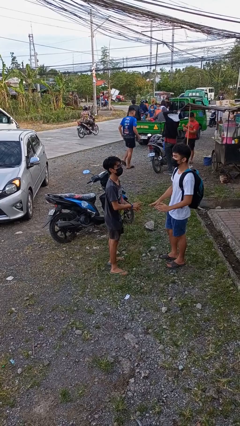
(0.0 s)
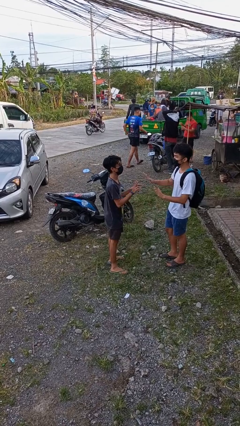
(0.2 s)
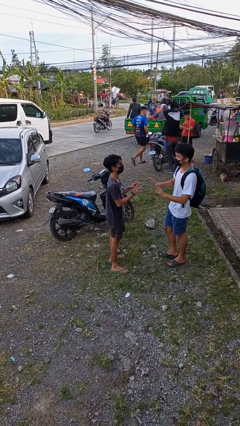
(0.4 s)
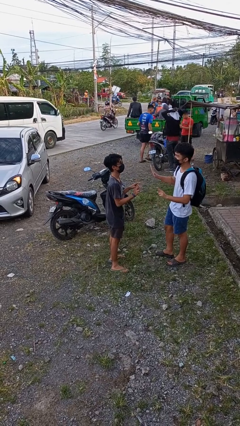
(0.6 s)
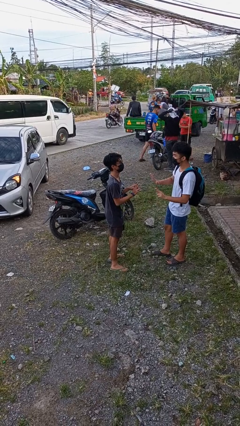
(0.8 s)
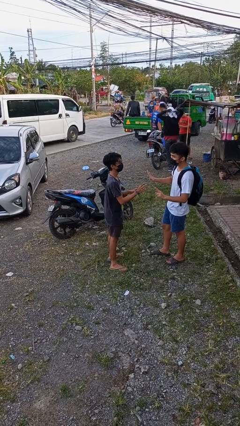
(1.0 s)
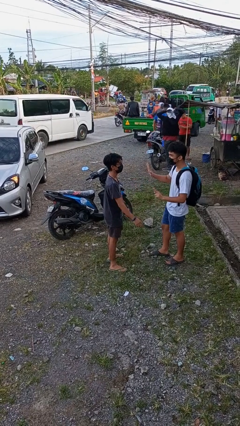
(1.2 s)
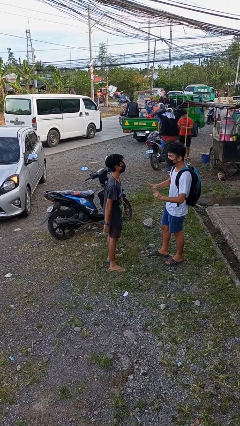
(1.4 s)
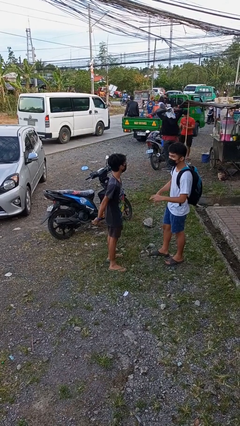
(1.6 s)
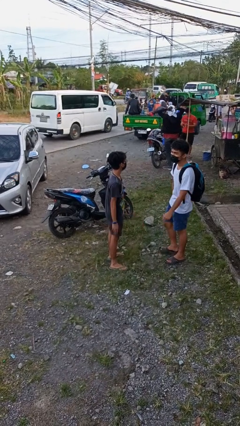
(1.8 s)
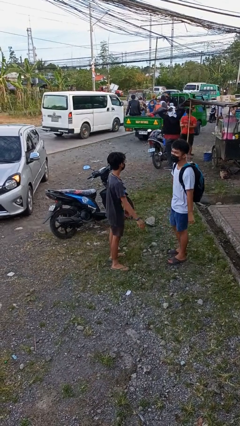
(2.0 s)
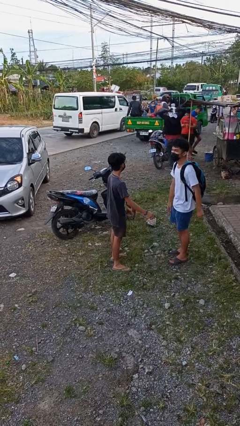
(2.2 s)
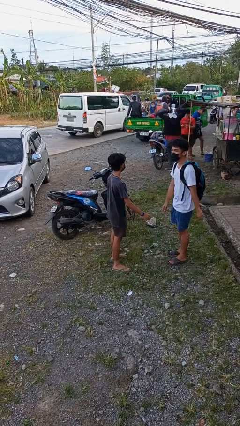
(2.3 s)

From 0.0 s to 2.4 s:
person talks to person

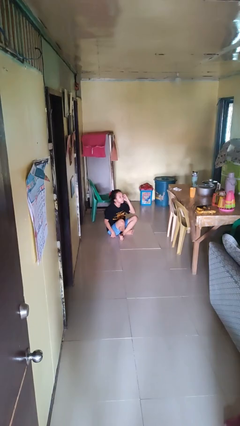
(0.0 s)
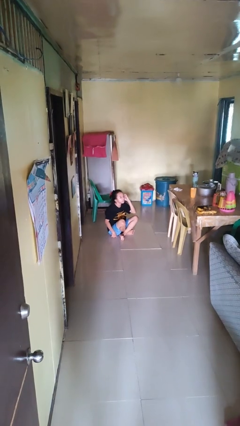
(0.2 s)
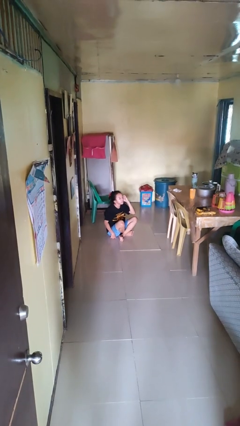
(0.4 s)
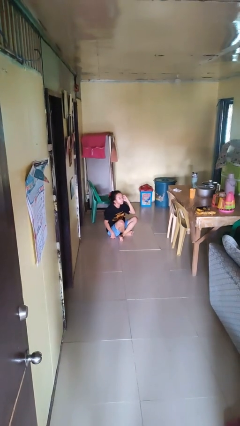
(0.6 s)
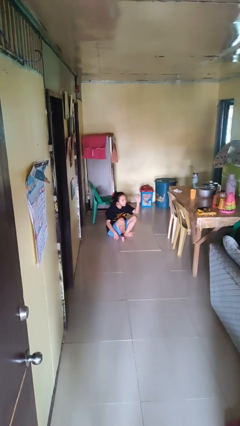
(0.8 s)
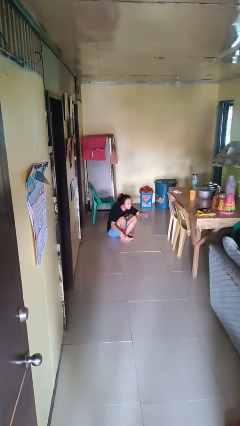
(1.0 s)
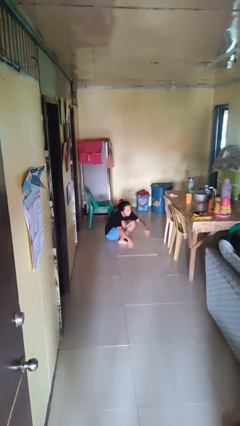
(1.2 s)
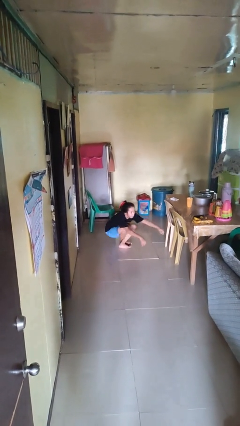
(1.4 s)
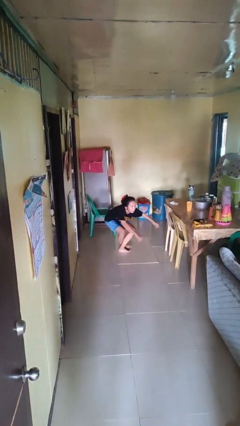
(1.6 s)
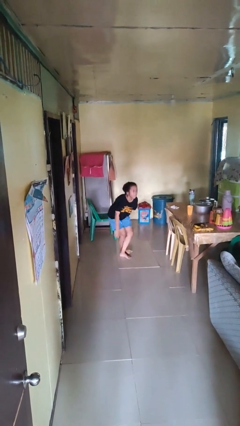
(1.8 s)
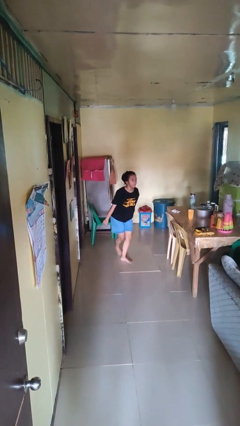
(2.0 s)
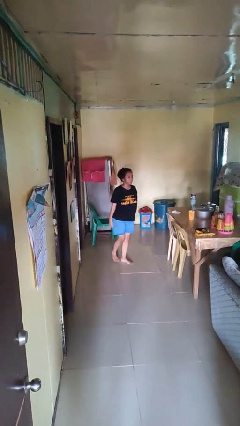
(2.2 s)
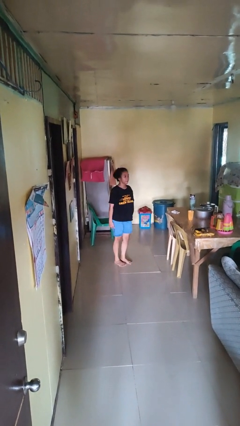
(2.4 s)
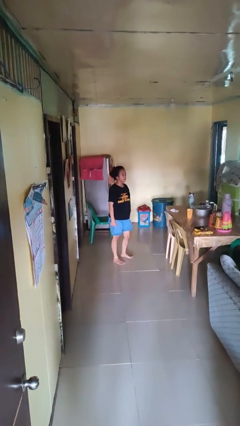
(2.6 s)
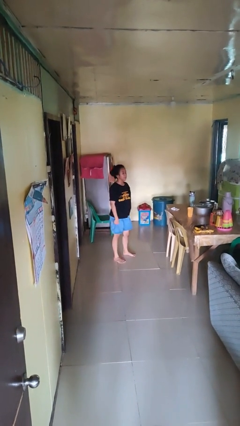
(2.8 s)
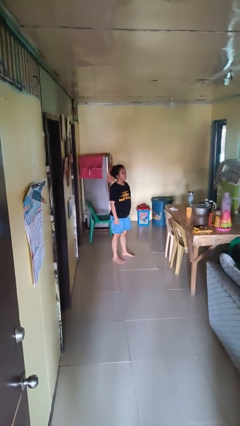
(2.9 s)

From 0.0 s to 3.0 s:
person stands up from floor

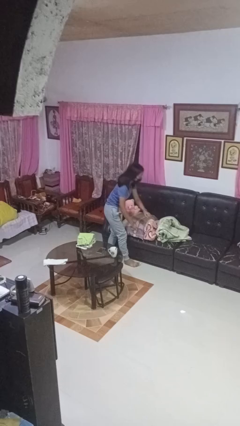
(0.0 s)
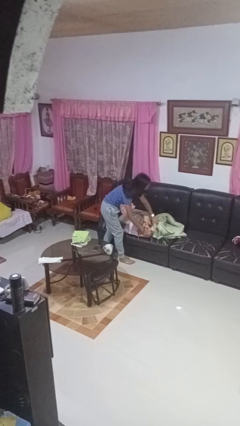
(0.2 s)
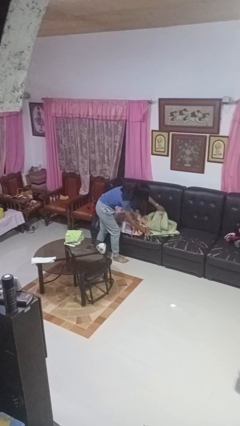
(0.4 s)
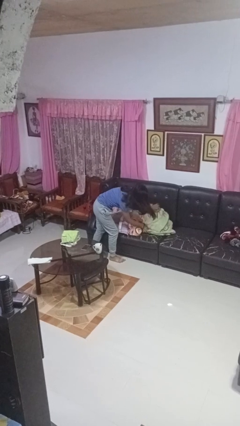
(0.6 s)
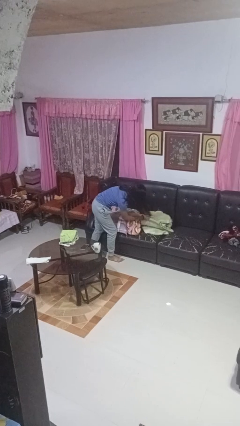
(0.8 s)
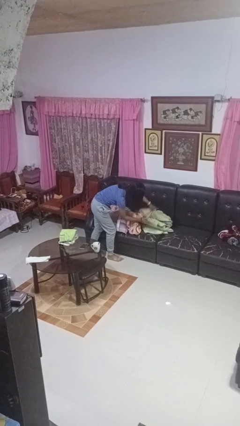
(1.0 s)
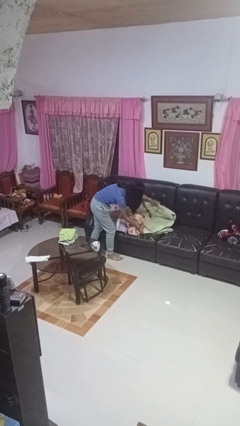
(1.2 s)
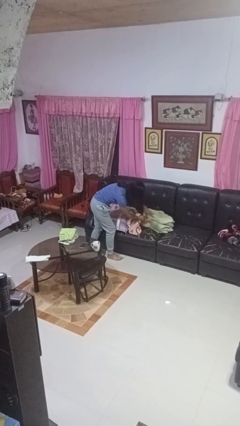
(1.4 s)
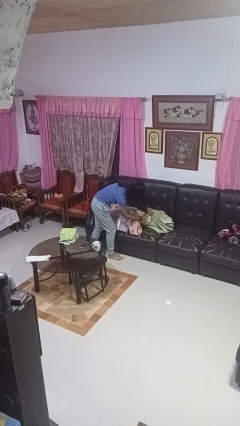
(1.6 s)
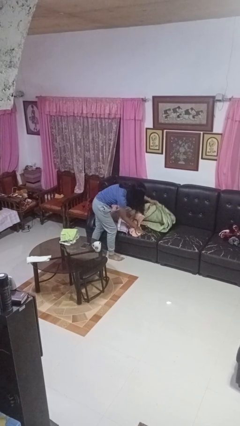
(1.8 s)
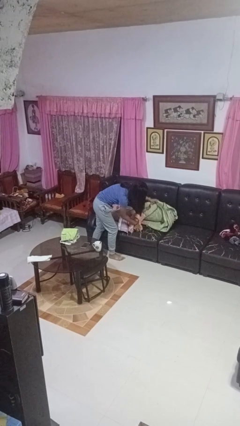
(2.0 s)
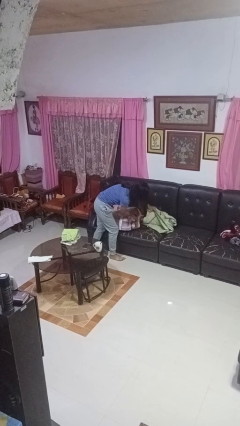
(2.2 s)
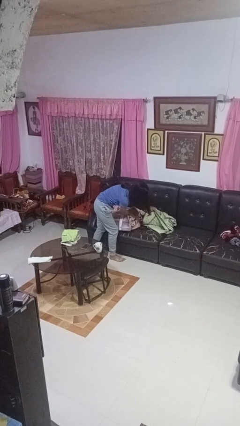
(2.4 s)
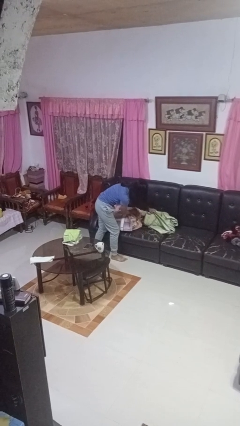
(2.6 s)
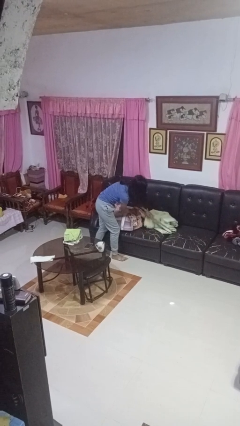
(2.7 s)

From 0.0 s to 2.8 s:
person searches in couch

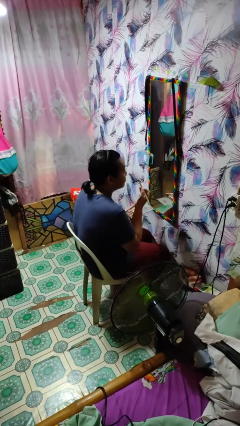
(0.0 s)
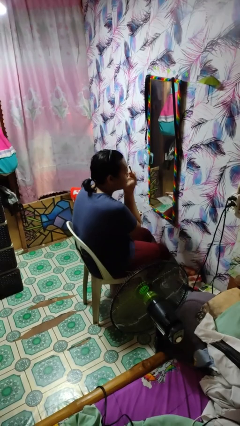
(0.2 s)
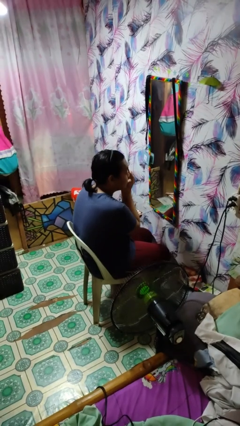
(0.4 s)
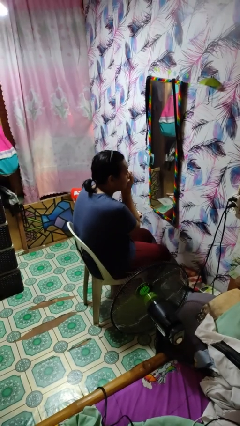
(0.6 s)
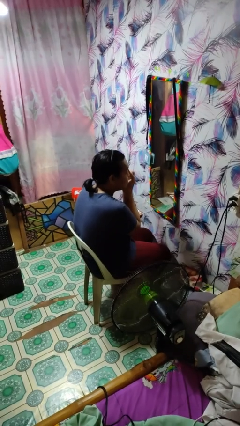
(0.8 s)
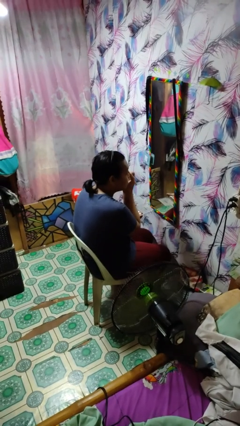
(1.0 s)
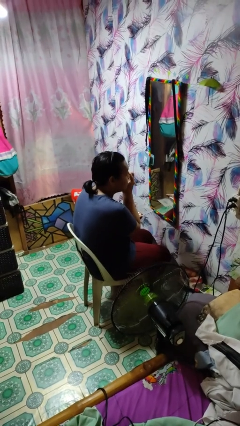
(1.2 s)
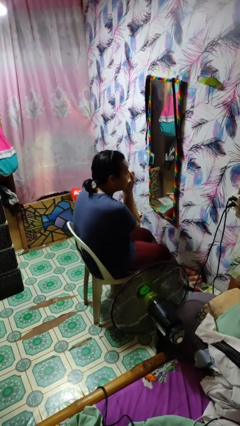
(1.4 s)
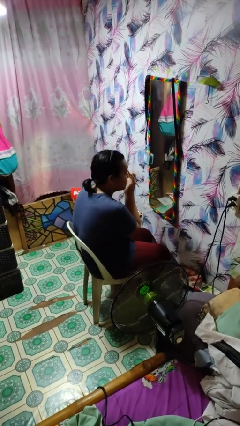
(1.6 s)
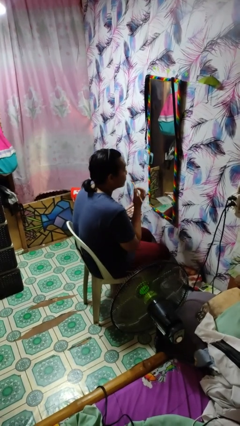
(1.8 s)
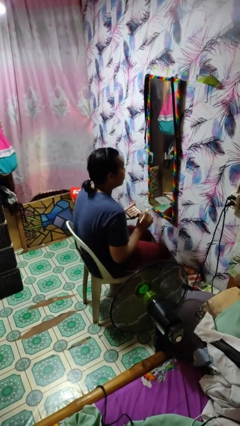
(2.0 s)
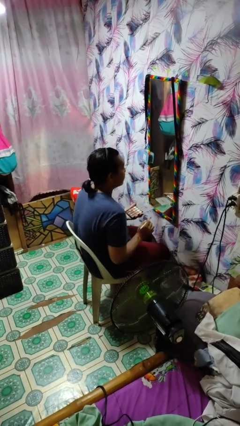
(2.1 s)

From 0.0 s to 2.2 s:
person applies eye makeup

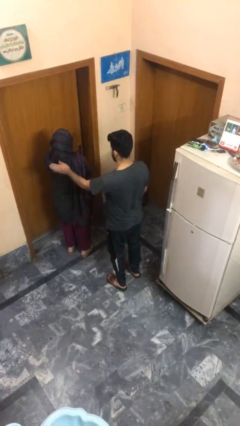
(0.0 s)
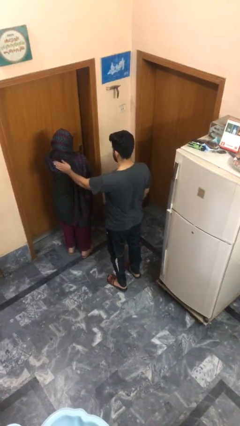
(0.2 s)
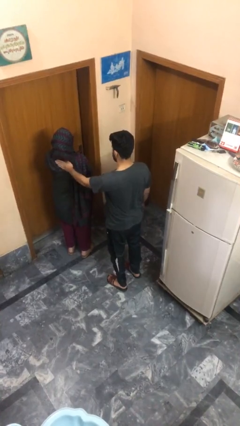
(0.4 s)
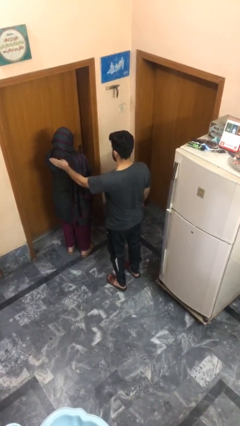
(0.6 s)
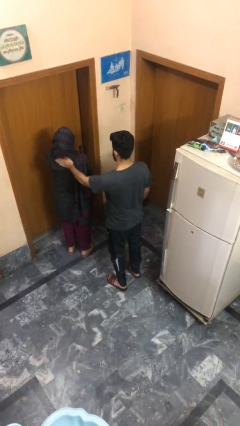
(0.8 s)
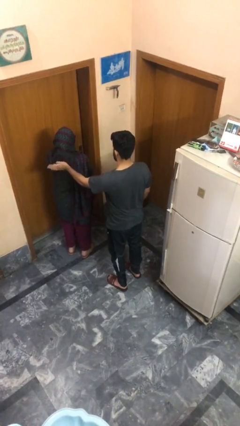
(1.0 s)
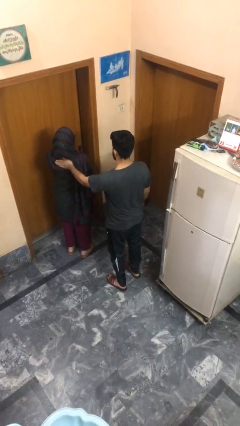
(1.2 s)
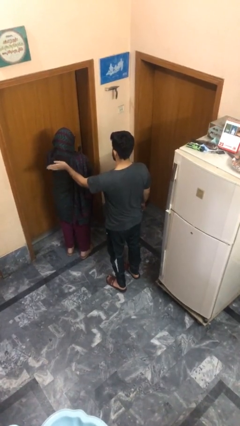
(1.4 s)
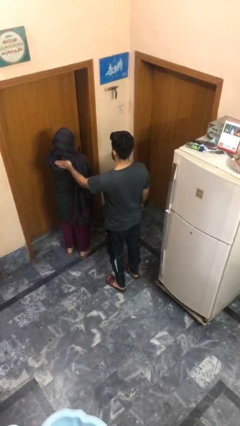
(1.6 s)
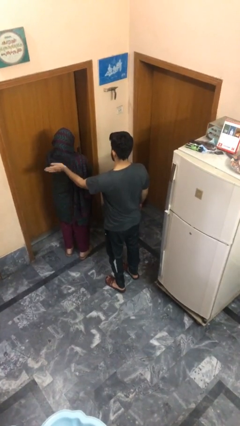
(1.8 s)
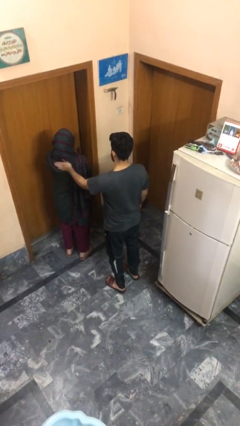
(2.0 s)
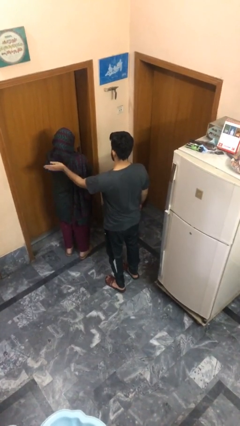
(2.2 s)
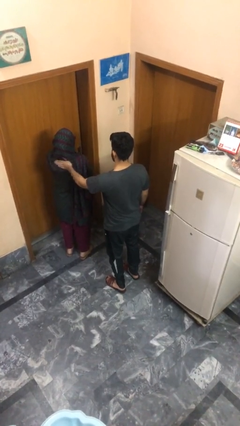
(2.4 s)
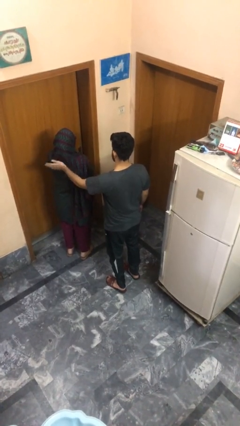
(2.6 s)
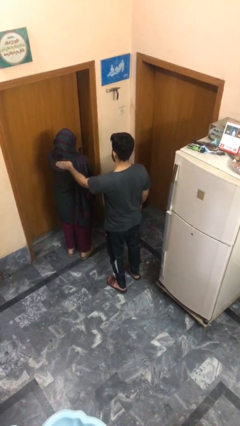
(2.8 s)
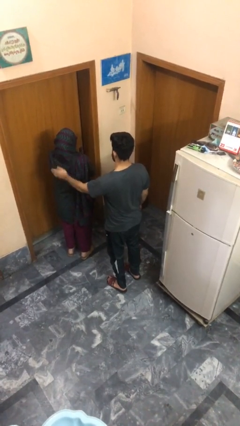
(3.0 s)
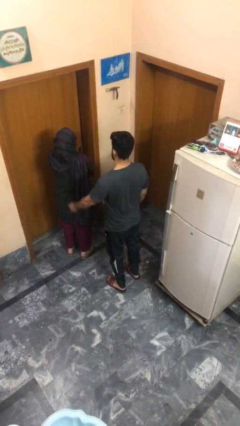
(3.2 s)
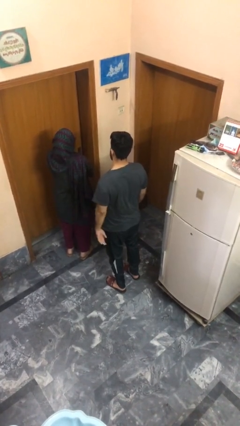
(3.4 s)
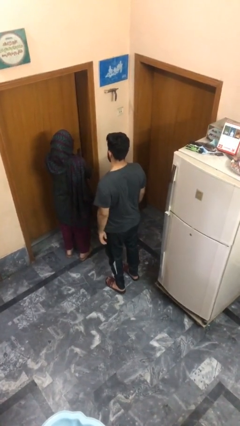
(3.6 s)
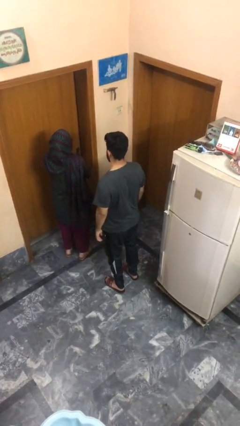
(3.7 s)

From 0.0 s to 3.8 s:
person touches back of person

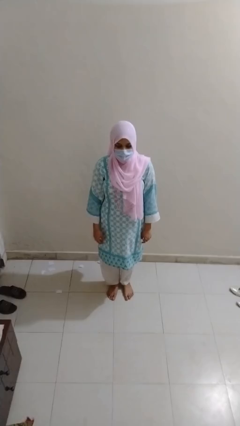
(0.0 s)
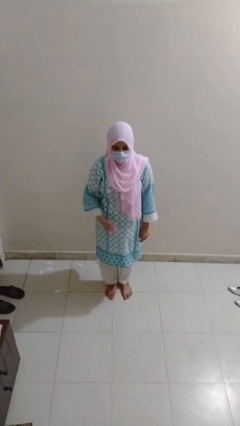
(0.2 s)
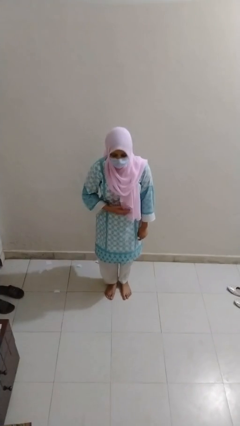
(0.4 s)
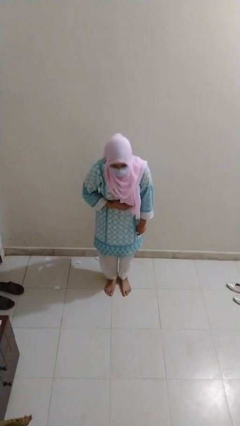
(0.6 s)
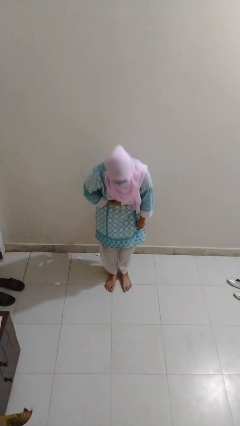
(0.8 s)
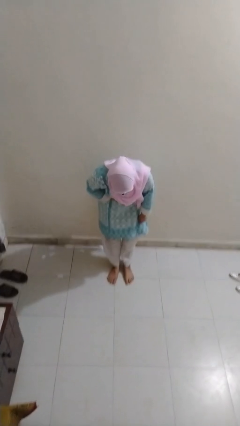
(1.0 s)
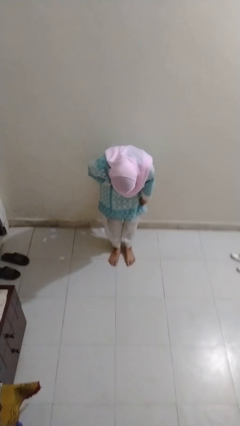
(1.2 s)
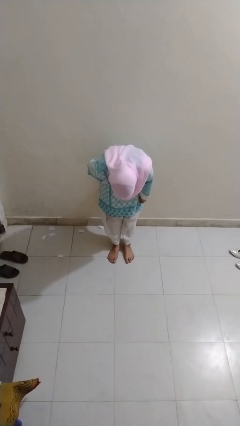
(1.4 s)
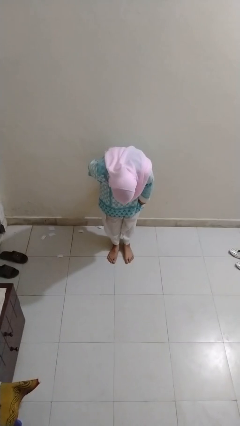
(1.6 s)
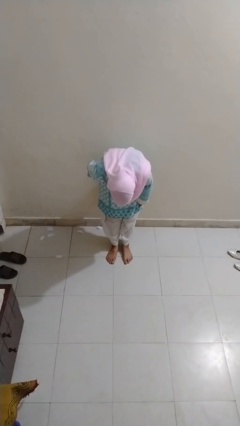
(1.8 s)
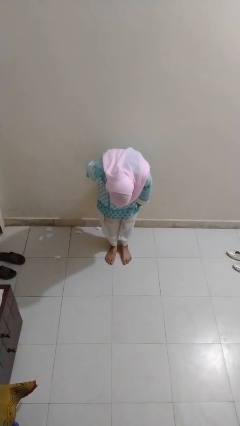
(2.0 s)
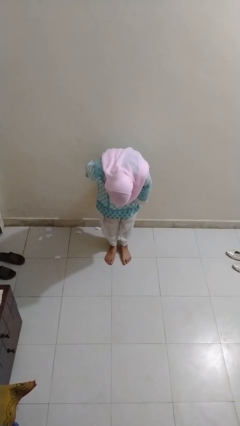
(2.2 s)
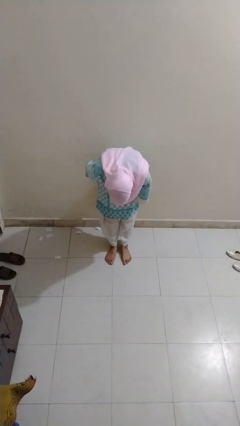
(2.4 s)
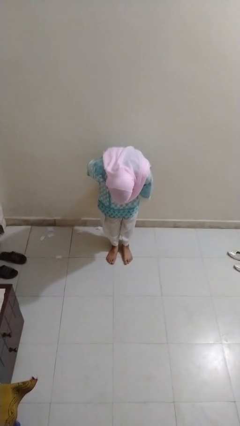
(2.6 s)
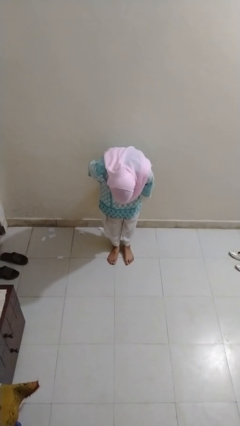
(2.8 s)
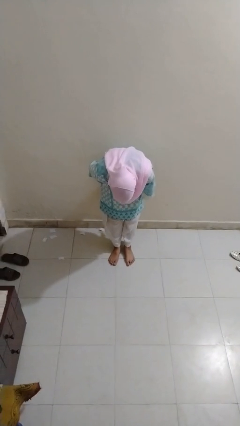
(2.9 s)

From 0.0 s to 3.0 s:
person bows
